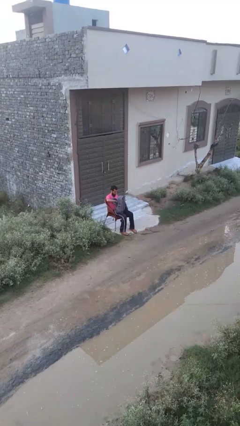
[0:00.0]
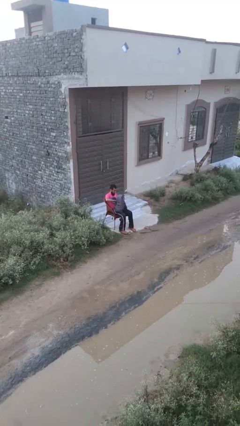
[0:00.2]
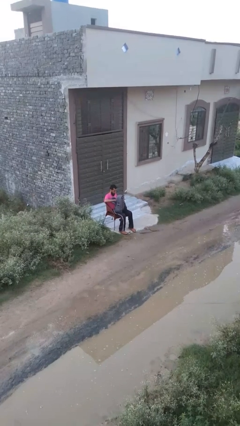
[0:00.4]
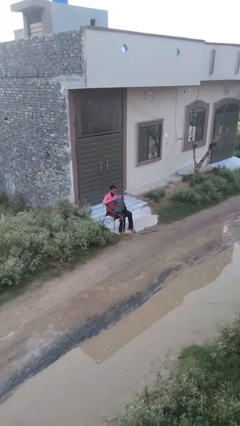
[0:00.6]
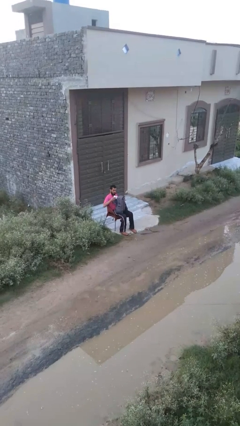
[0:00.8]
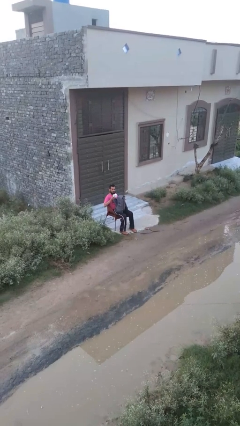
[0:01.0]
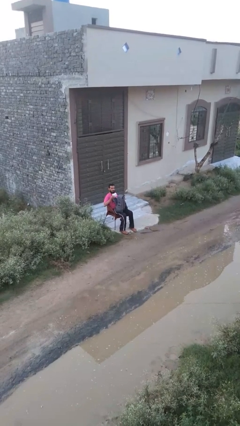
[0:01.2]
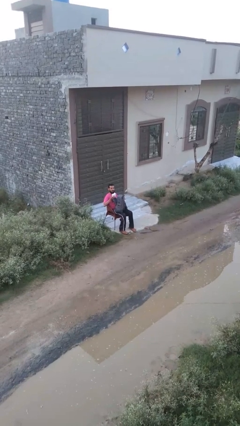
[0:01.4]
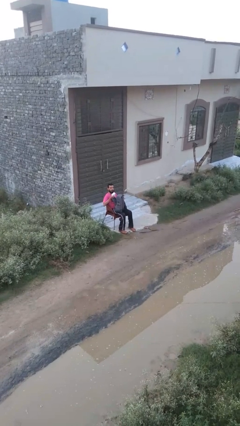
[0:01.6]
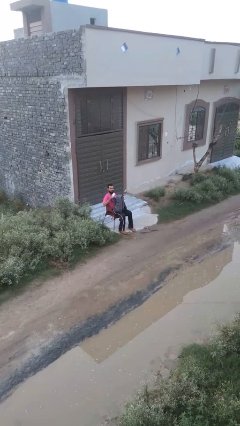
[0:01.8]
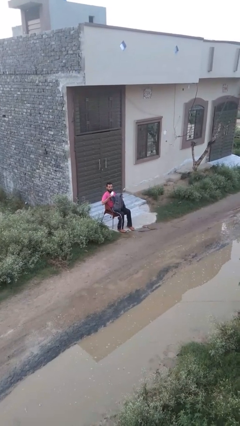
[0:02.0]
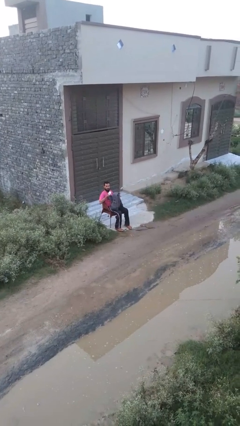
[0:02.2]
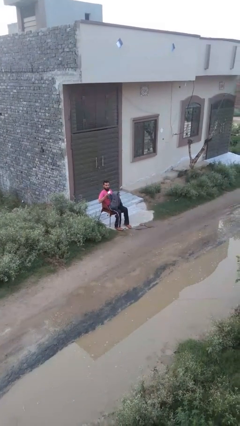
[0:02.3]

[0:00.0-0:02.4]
person takes object from backpack

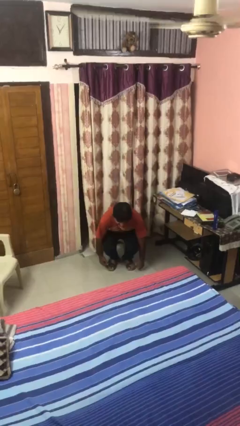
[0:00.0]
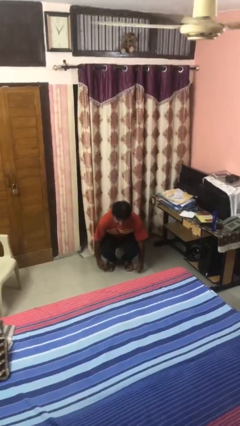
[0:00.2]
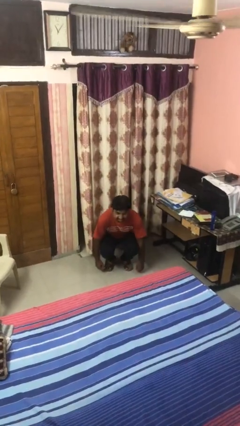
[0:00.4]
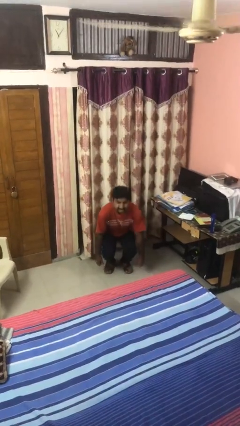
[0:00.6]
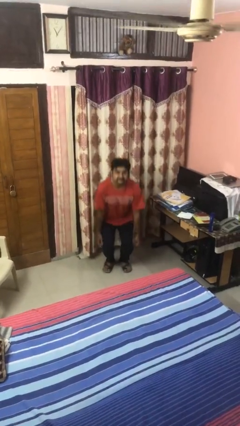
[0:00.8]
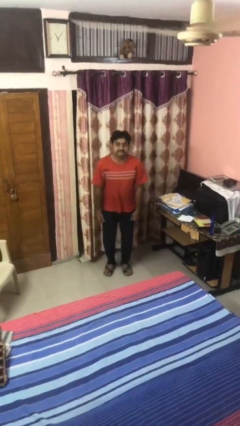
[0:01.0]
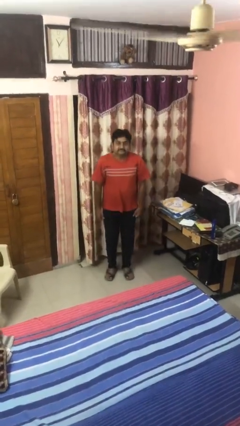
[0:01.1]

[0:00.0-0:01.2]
person stands up

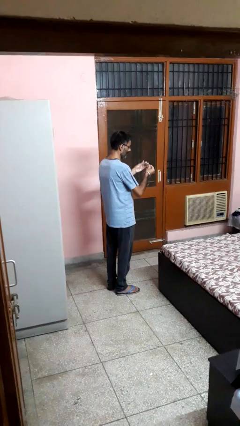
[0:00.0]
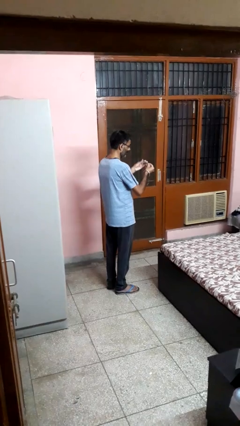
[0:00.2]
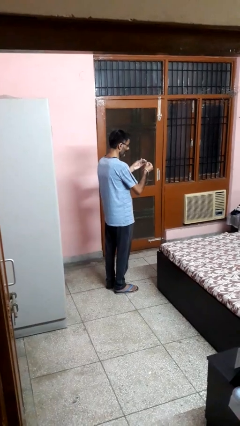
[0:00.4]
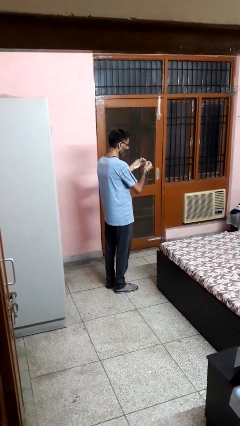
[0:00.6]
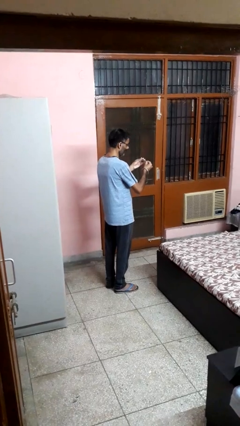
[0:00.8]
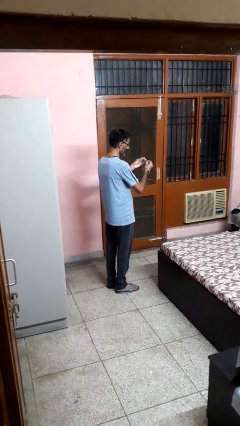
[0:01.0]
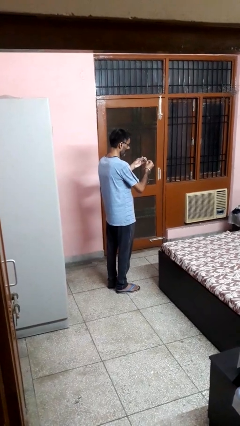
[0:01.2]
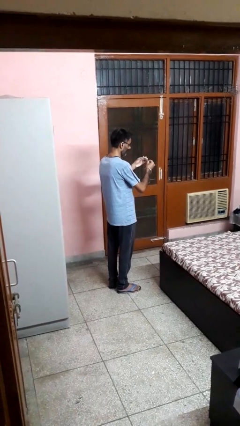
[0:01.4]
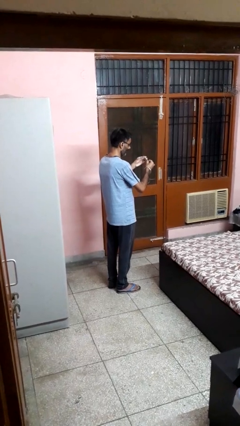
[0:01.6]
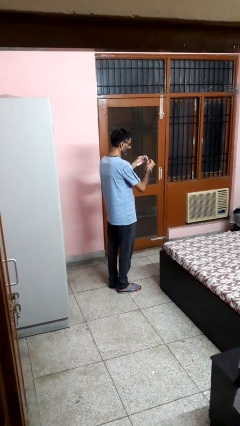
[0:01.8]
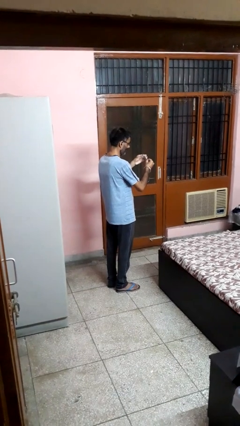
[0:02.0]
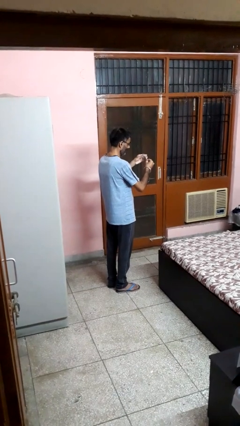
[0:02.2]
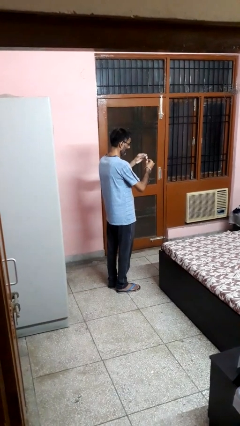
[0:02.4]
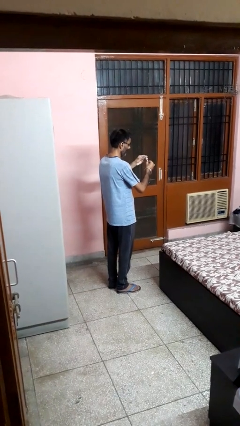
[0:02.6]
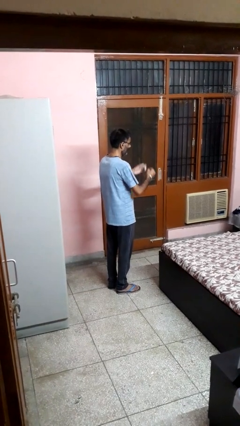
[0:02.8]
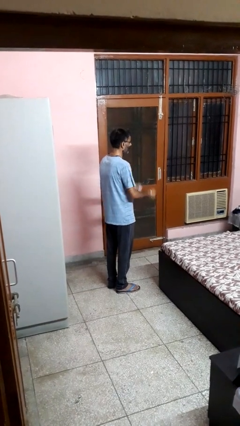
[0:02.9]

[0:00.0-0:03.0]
person clips fingernails

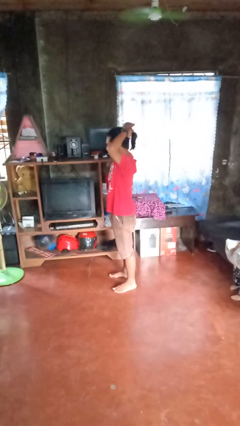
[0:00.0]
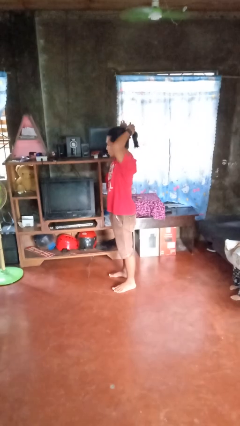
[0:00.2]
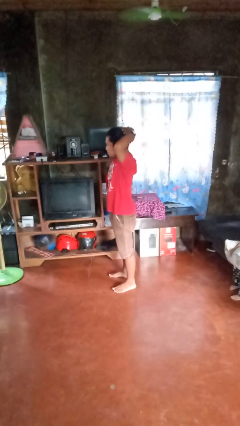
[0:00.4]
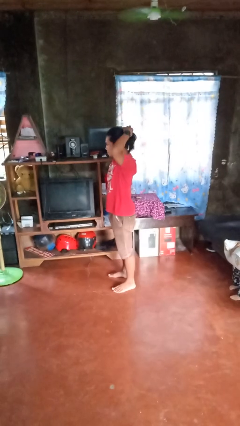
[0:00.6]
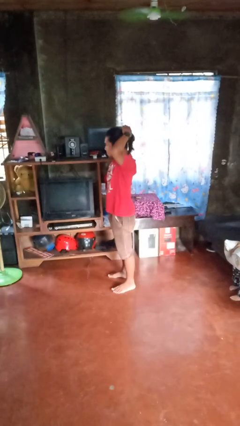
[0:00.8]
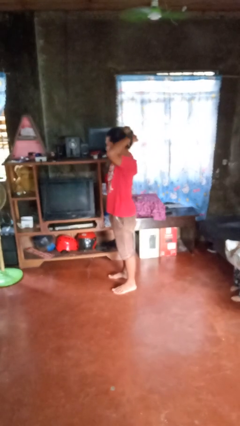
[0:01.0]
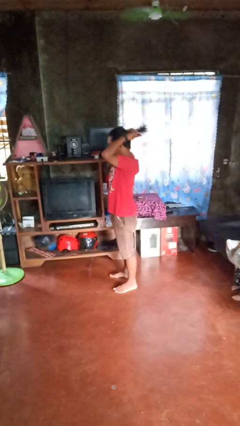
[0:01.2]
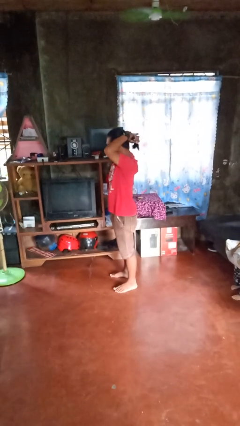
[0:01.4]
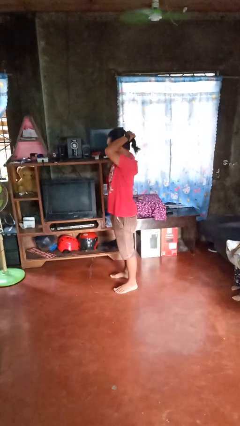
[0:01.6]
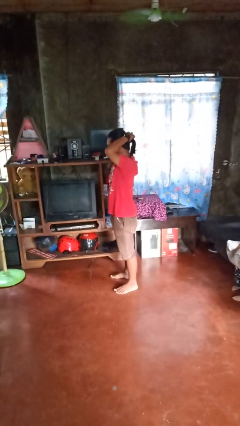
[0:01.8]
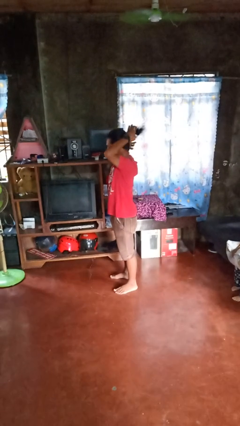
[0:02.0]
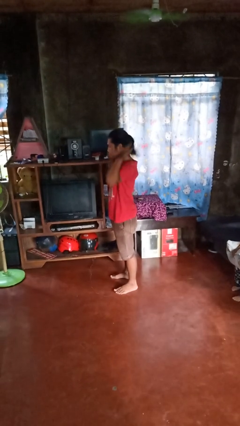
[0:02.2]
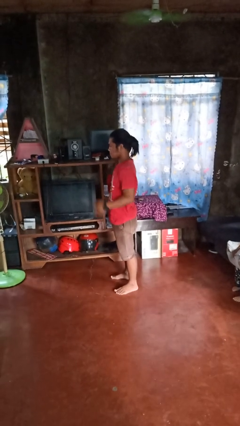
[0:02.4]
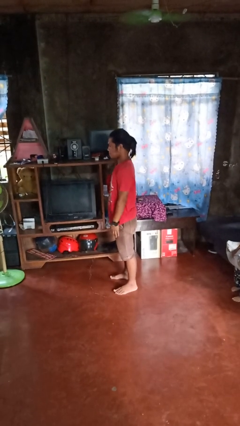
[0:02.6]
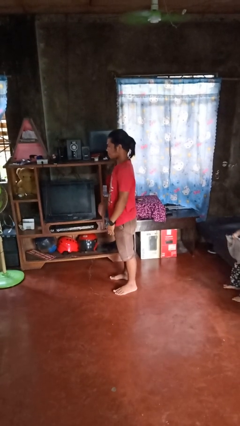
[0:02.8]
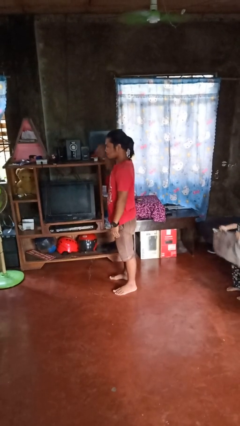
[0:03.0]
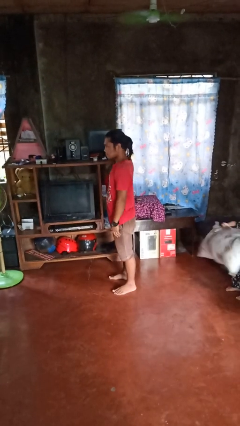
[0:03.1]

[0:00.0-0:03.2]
person puts hair in ponytail

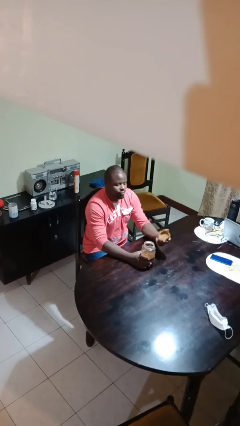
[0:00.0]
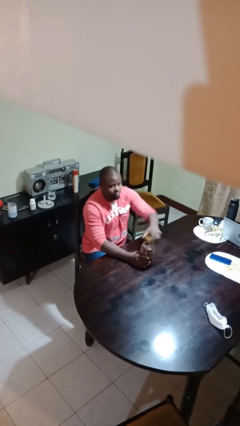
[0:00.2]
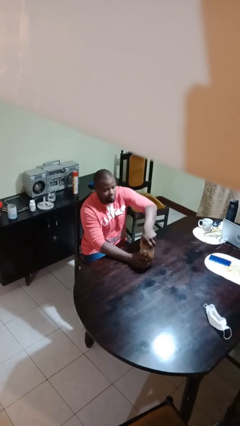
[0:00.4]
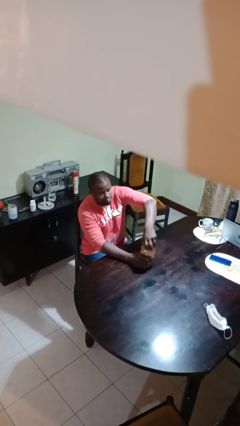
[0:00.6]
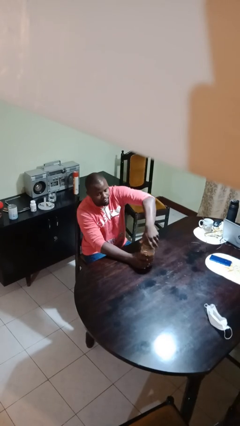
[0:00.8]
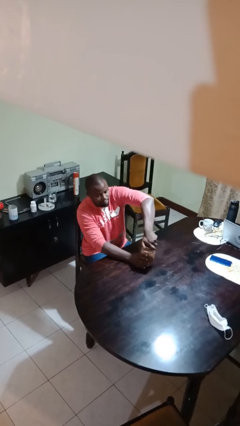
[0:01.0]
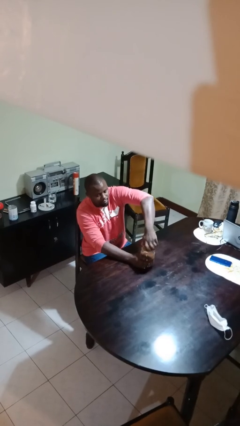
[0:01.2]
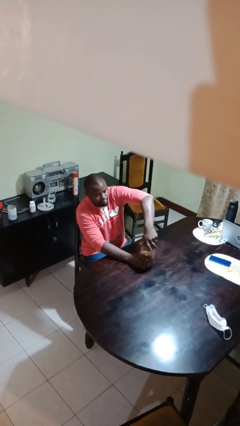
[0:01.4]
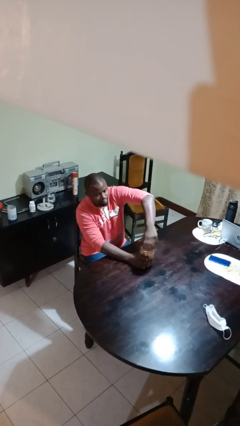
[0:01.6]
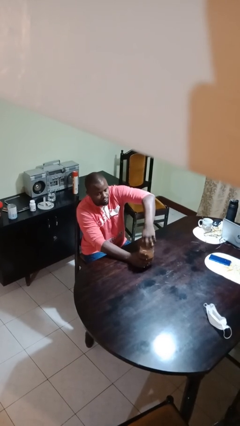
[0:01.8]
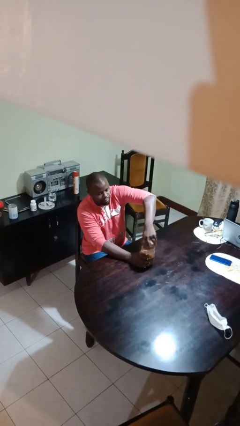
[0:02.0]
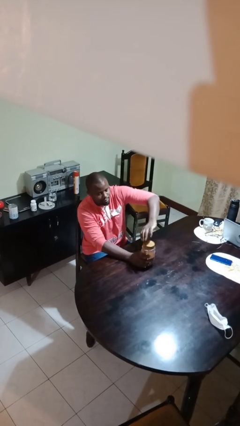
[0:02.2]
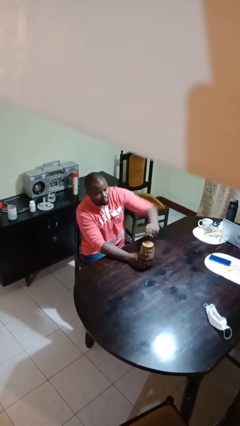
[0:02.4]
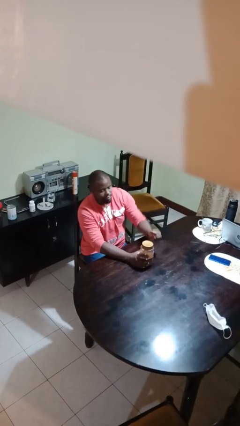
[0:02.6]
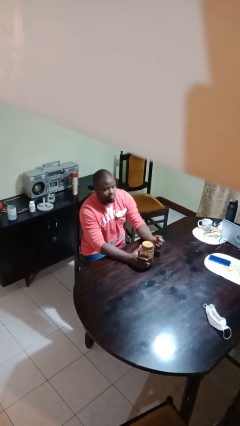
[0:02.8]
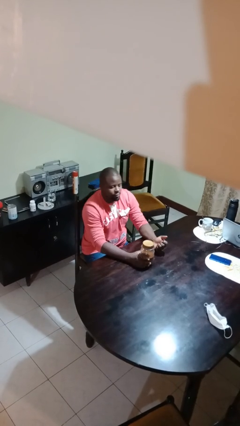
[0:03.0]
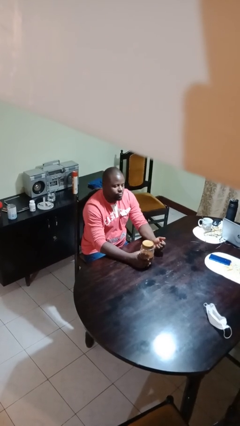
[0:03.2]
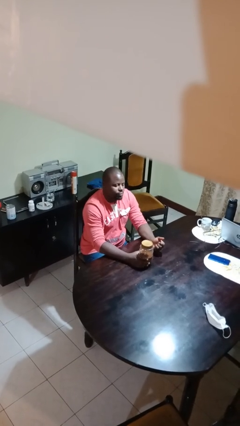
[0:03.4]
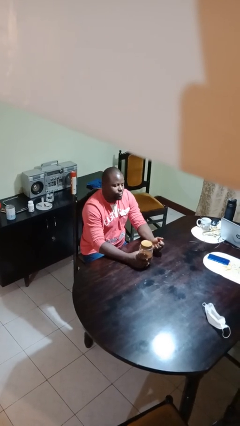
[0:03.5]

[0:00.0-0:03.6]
person closes jar

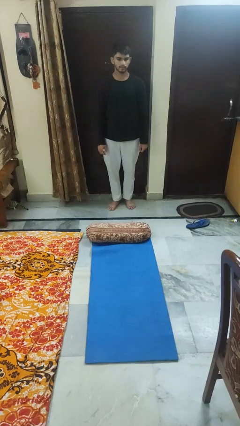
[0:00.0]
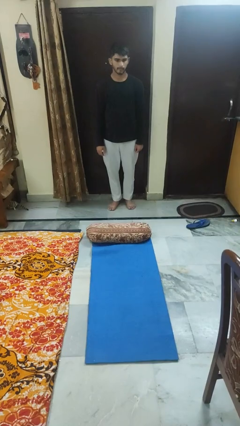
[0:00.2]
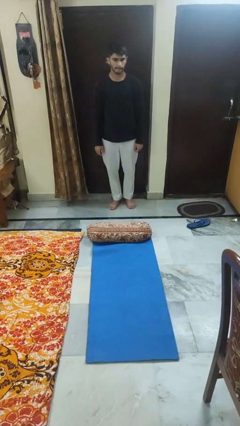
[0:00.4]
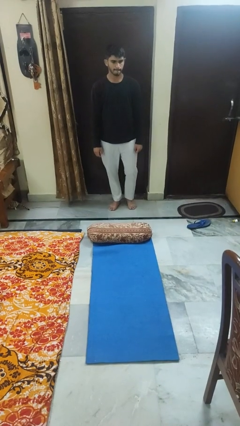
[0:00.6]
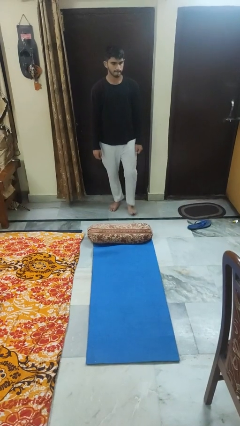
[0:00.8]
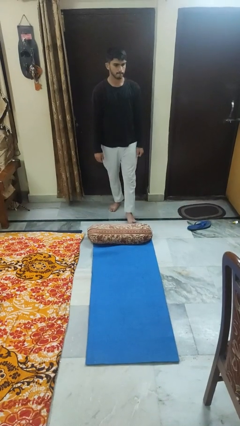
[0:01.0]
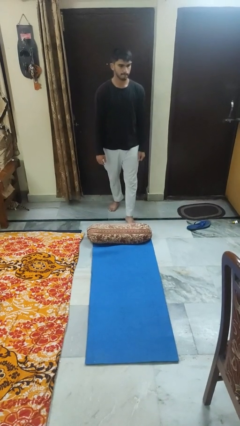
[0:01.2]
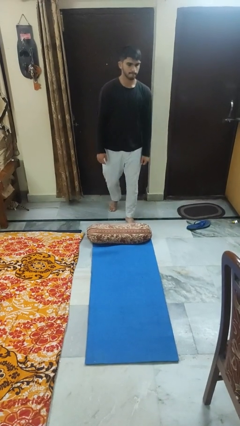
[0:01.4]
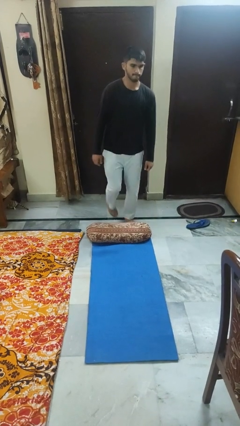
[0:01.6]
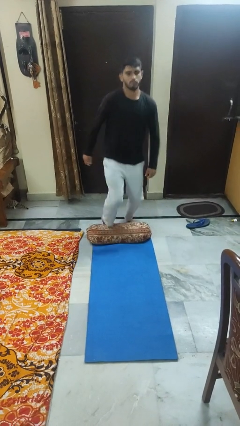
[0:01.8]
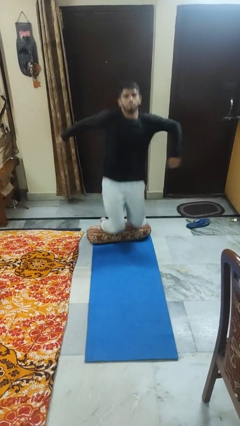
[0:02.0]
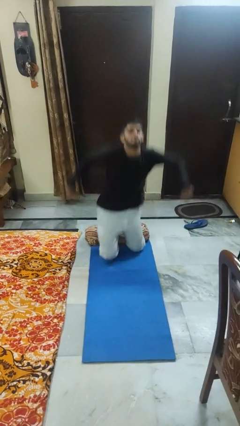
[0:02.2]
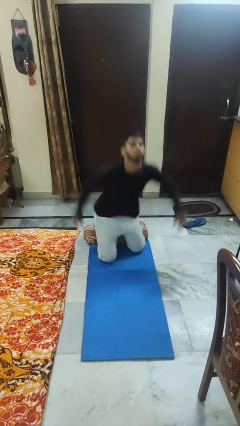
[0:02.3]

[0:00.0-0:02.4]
person trips on object on floor

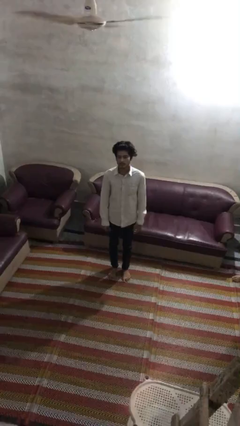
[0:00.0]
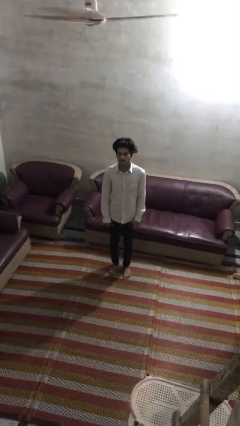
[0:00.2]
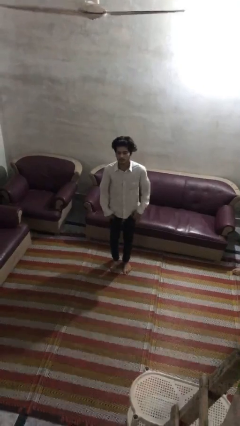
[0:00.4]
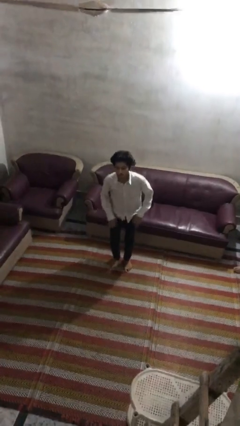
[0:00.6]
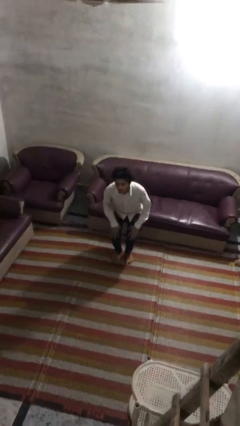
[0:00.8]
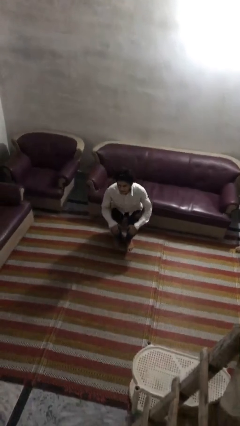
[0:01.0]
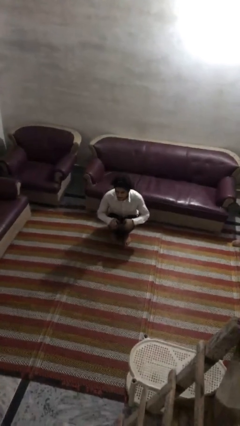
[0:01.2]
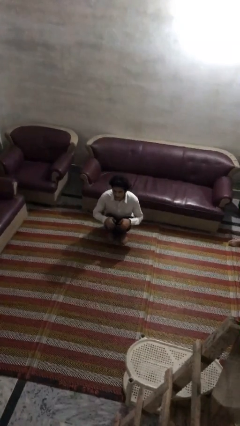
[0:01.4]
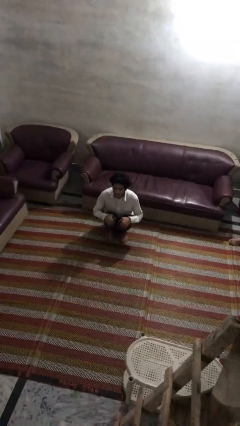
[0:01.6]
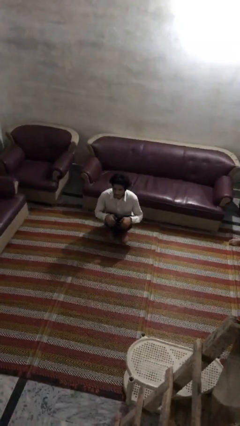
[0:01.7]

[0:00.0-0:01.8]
person squats
